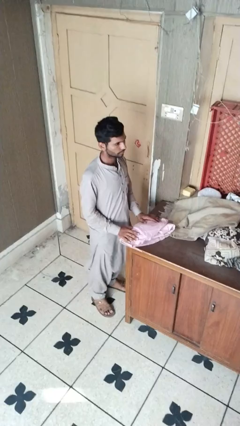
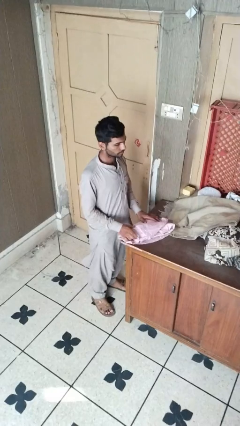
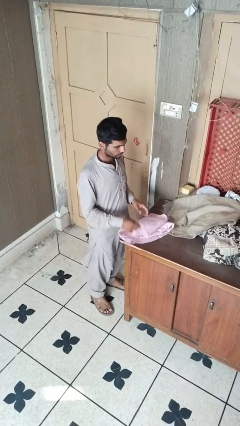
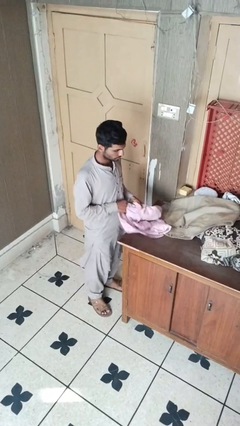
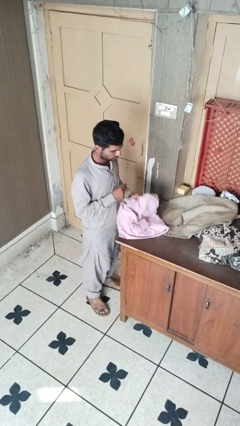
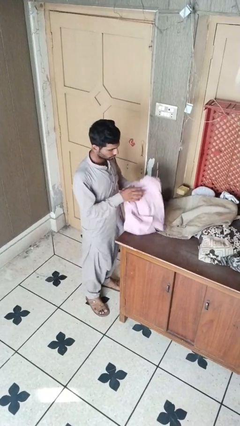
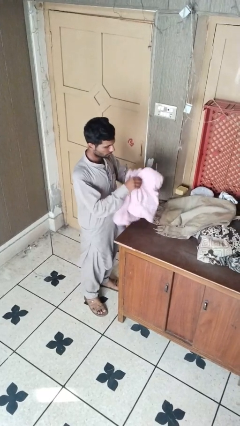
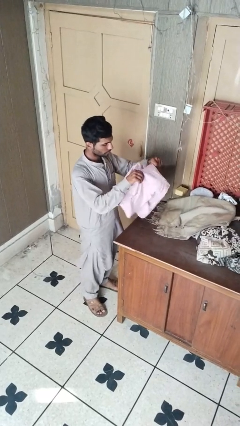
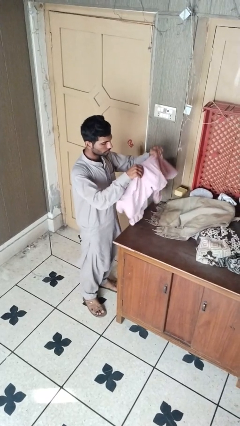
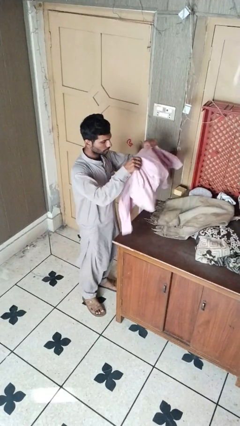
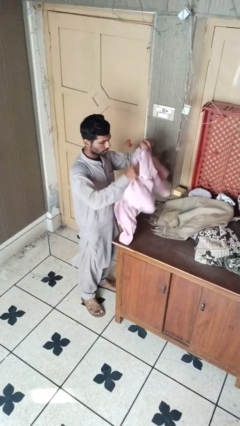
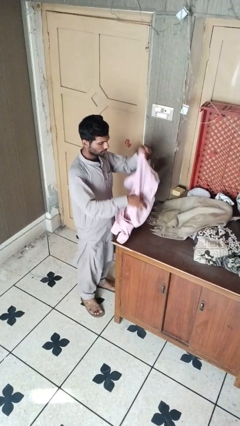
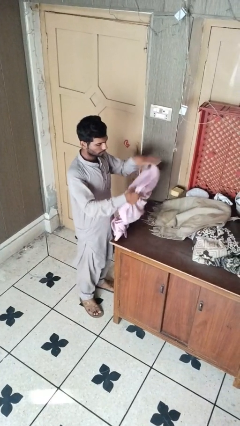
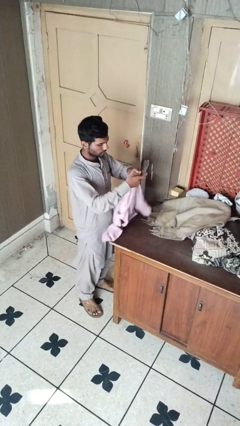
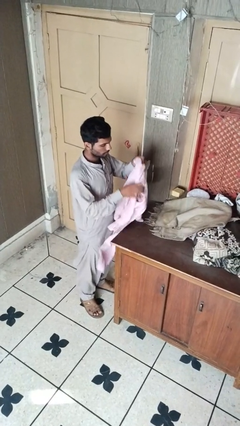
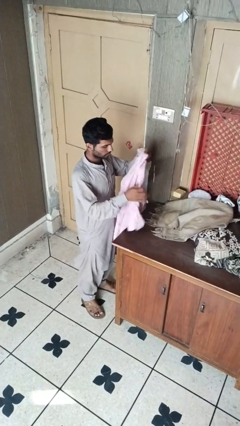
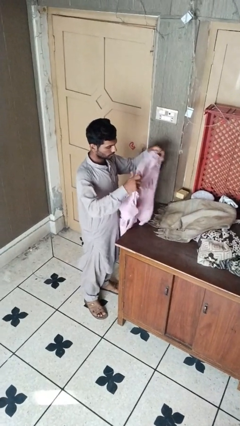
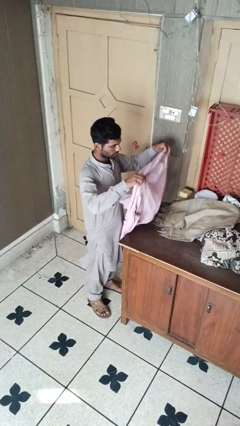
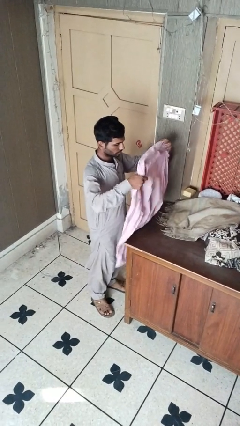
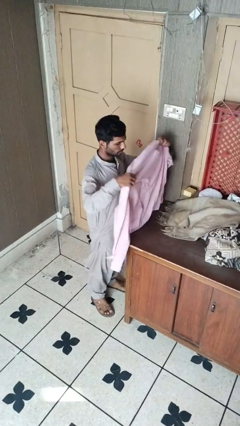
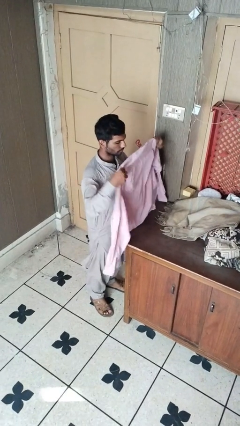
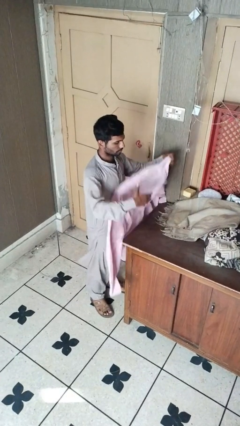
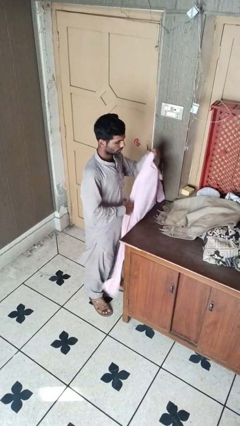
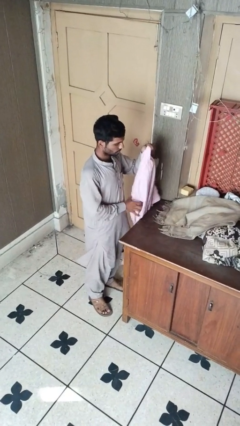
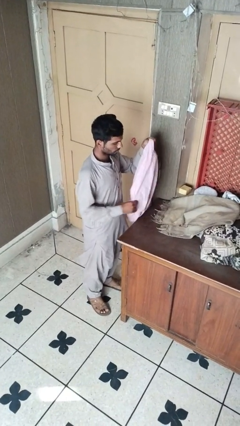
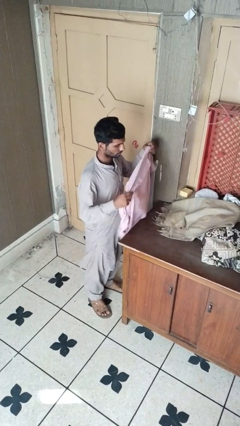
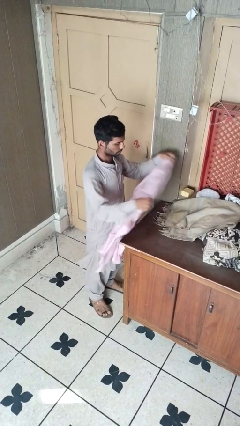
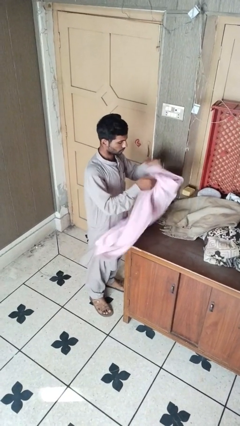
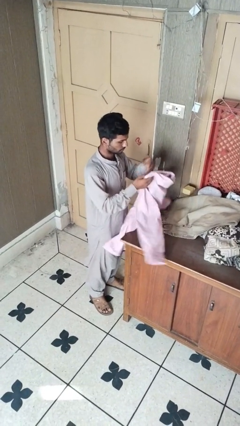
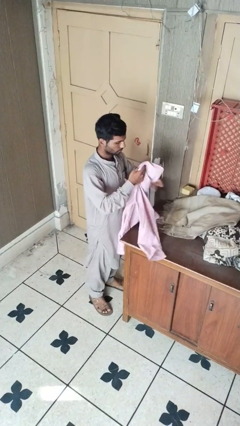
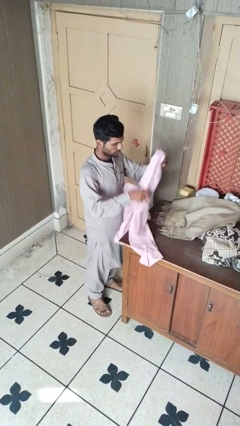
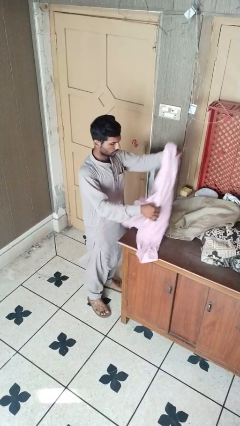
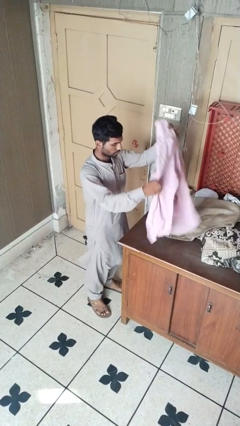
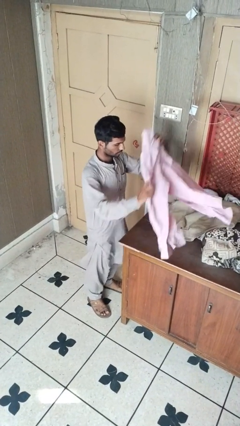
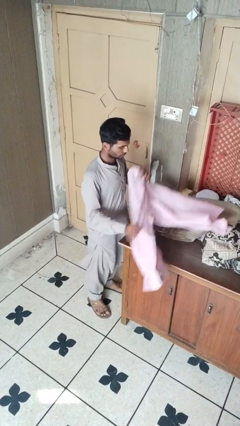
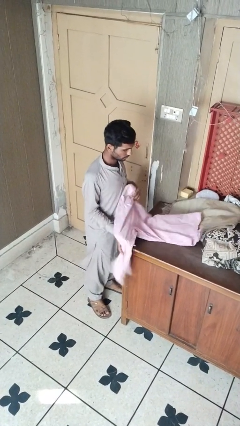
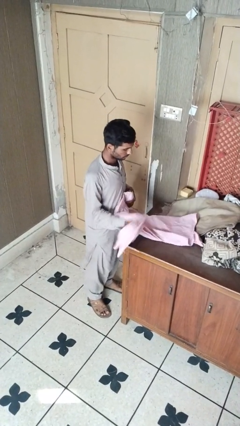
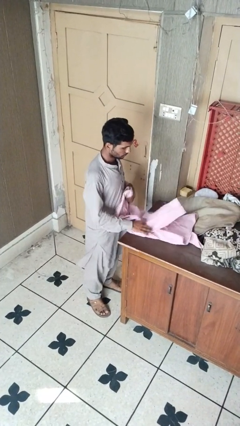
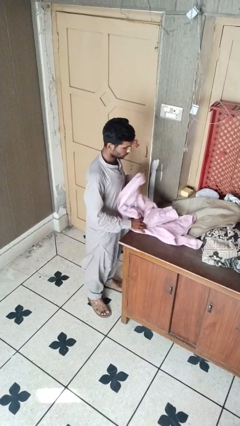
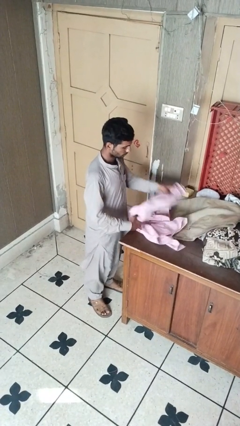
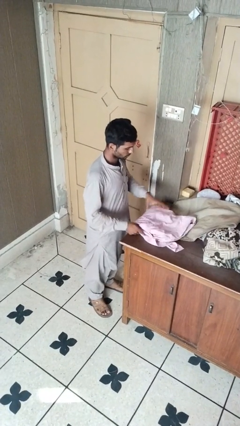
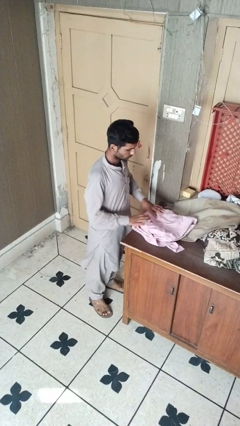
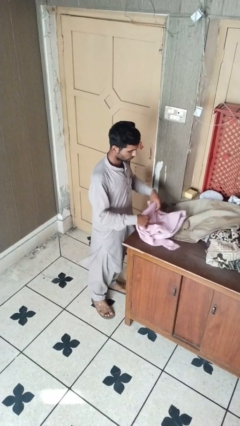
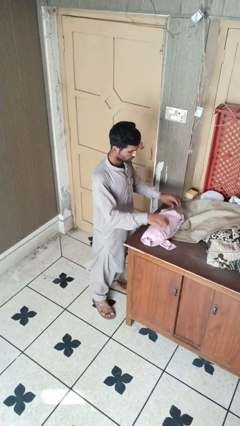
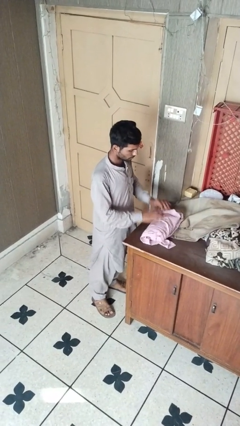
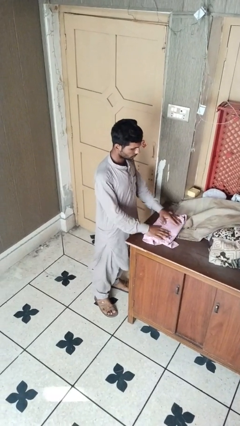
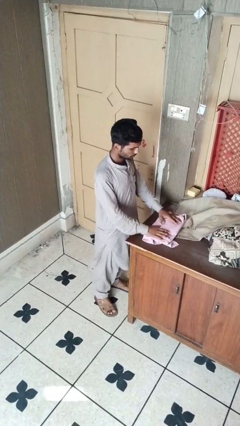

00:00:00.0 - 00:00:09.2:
person folds shirt

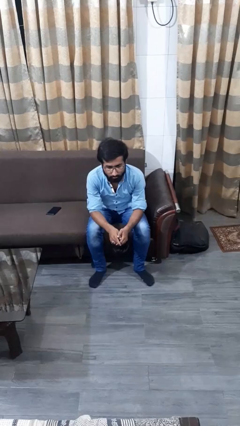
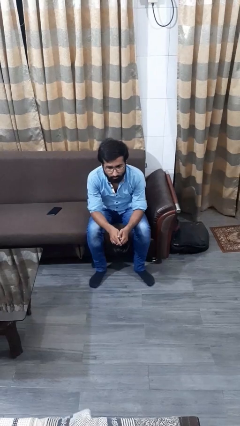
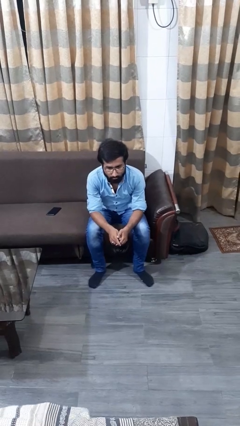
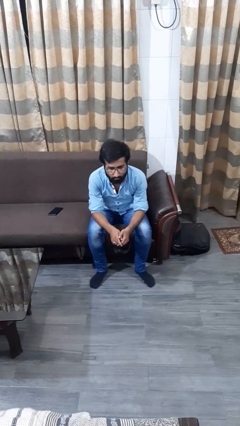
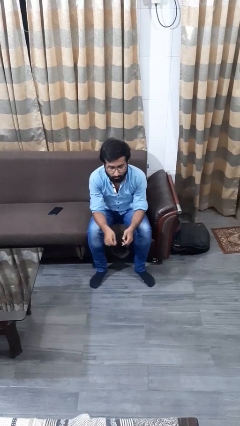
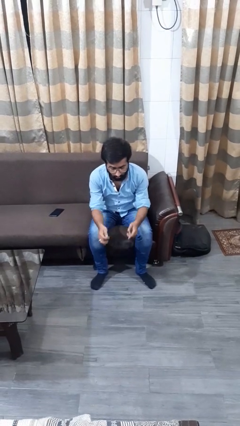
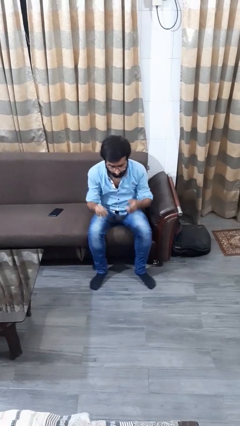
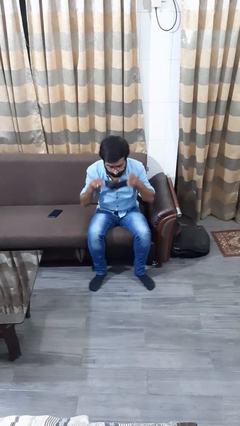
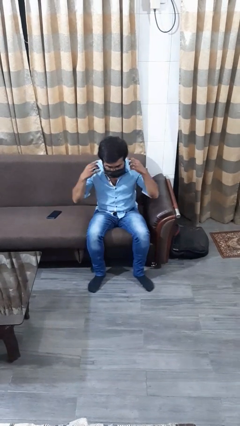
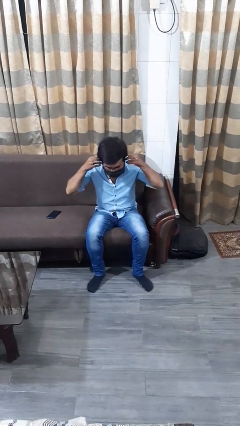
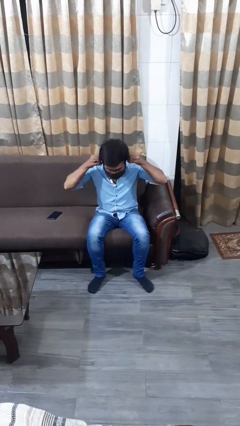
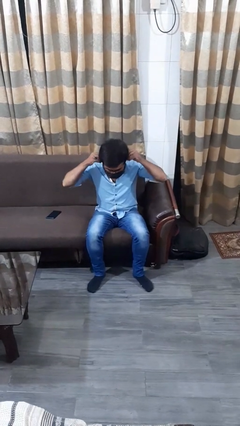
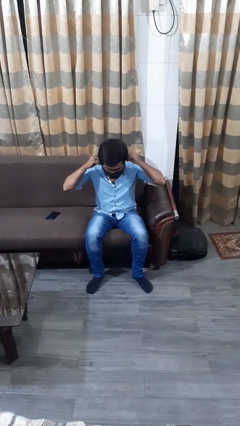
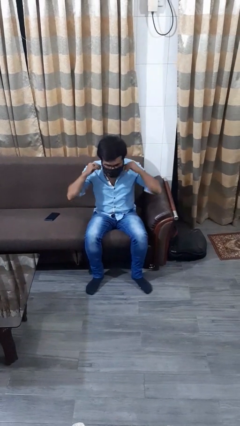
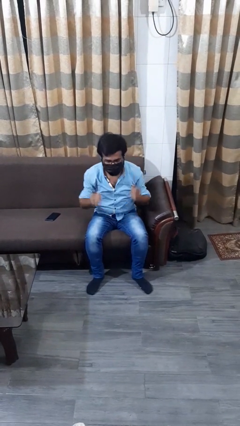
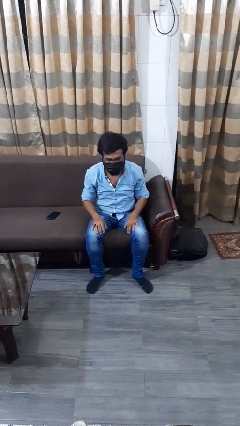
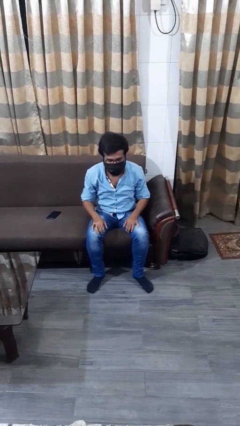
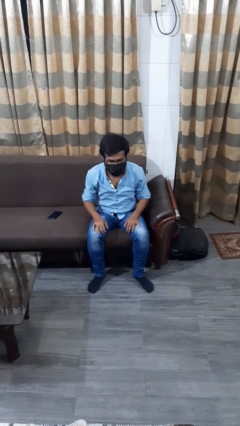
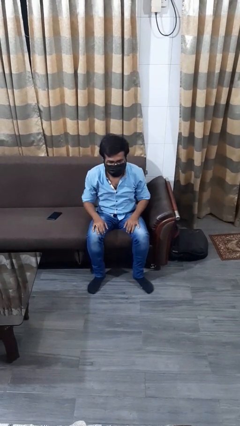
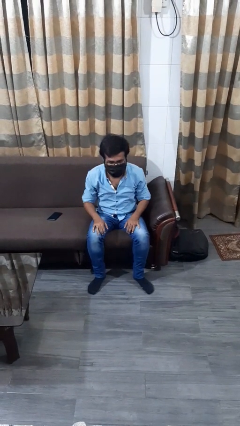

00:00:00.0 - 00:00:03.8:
person puts on facemask

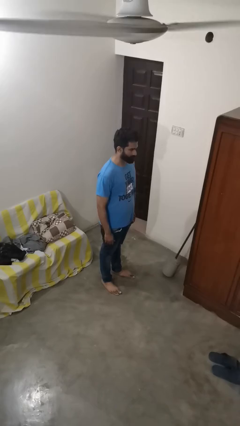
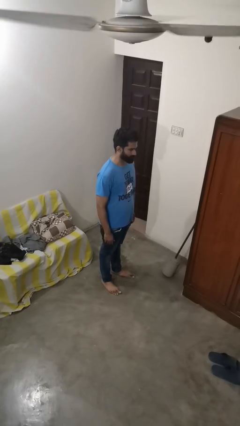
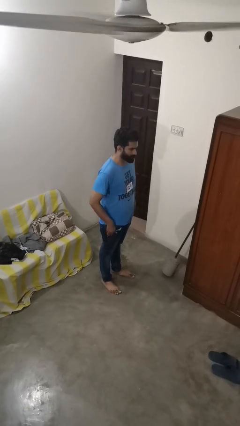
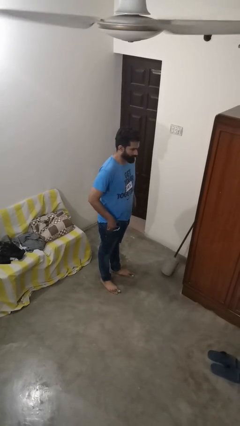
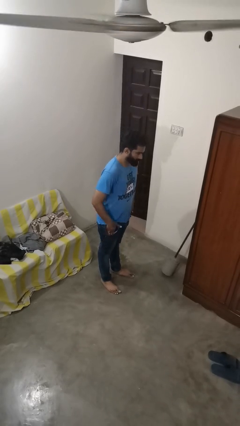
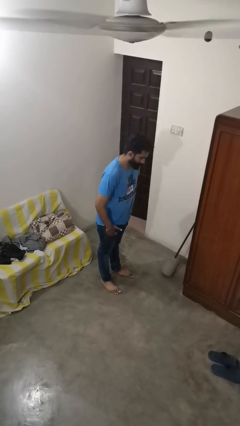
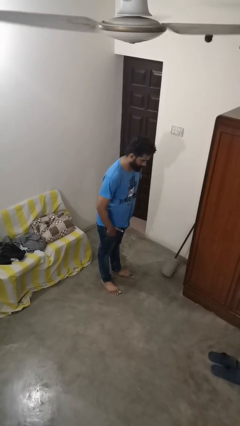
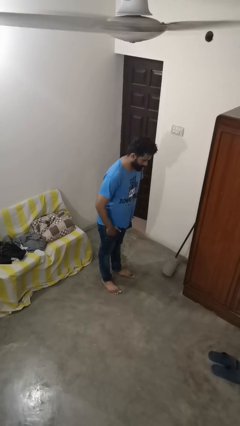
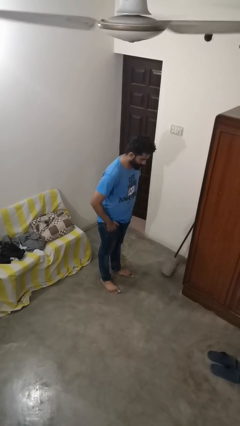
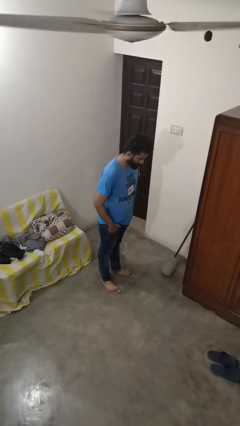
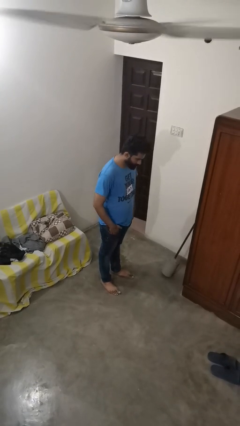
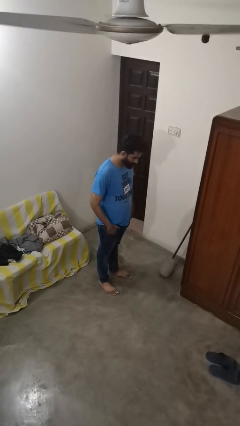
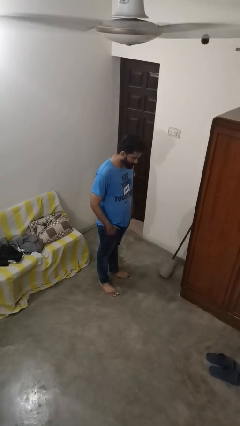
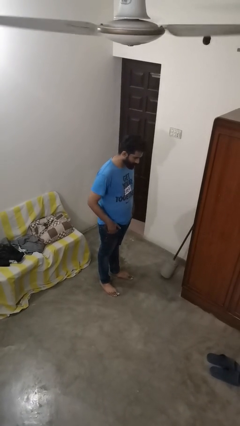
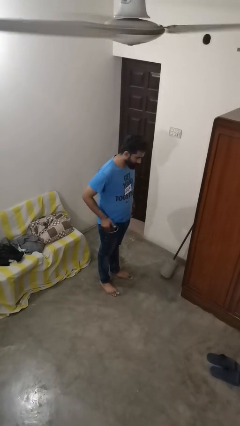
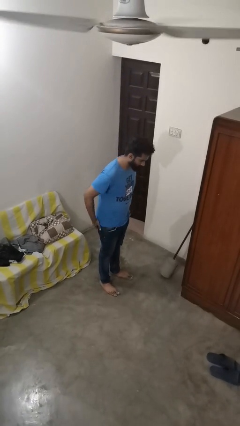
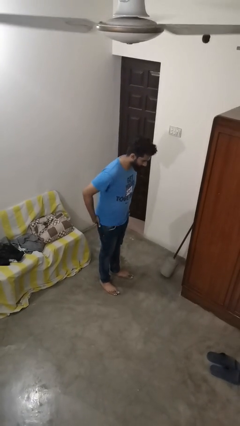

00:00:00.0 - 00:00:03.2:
person puts hands in back pockets

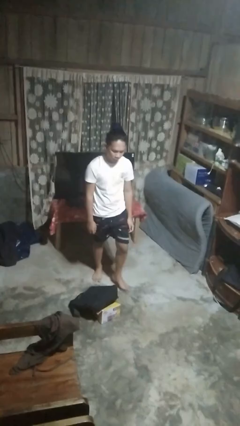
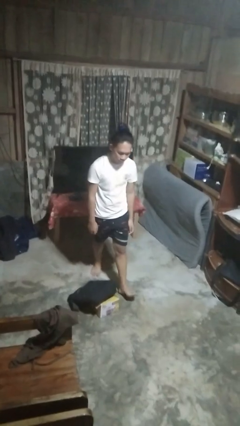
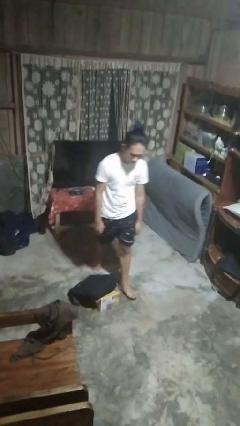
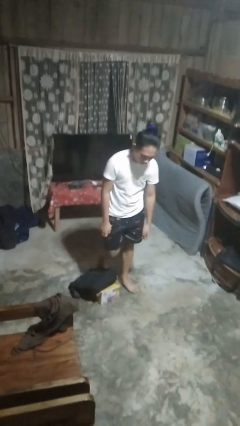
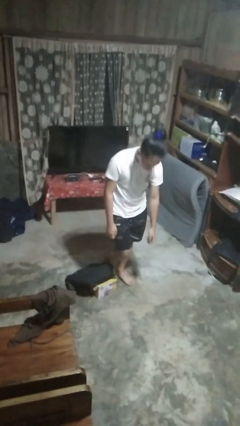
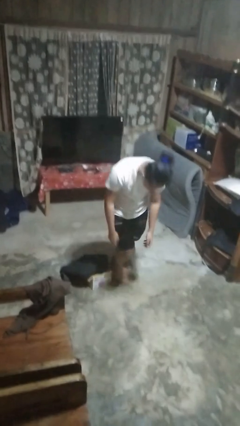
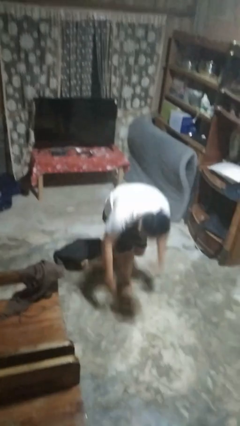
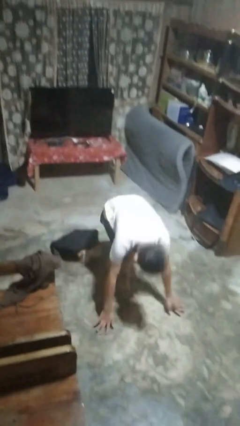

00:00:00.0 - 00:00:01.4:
person trips on object on floor
